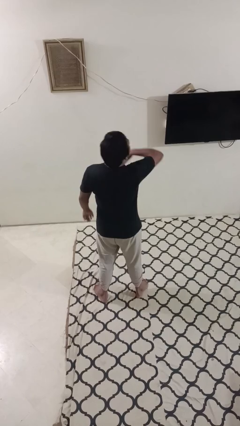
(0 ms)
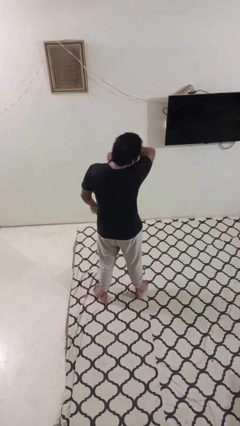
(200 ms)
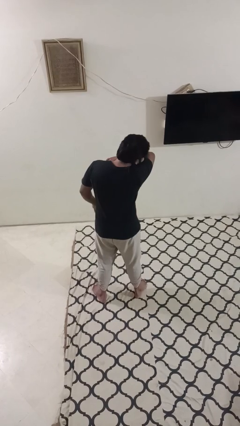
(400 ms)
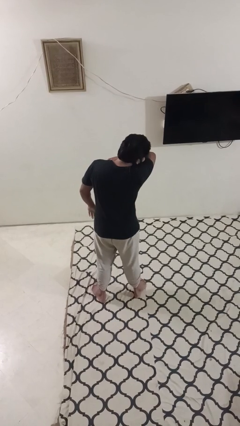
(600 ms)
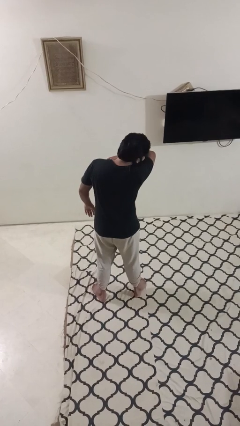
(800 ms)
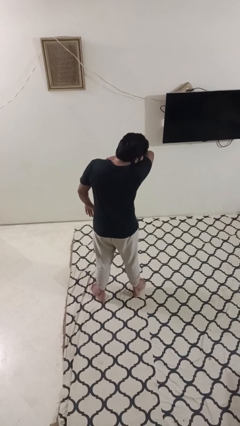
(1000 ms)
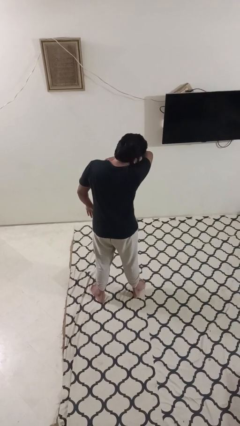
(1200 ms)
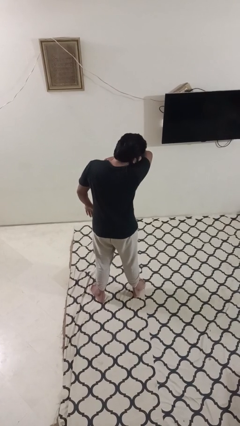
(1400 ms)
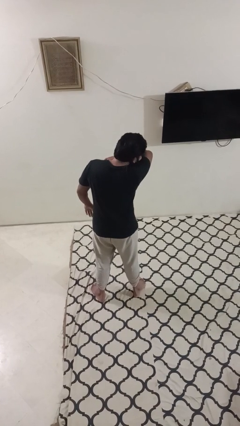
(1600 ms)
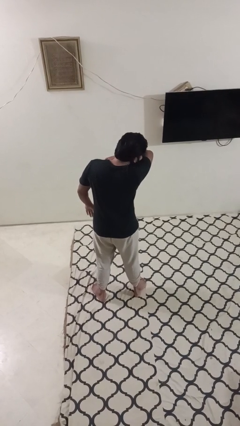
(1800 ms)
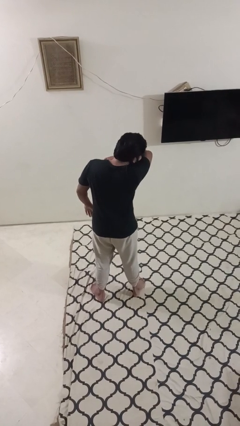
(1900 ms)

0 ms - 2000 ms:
person sneezes into arm

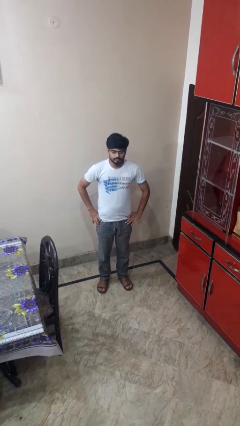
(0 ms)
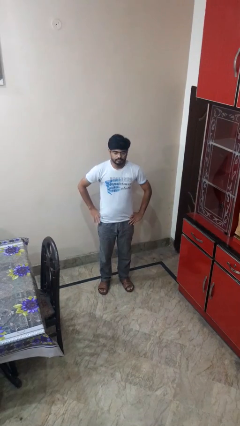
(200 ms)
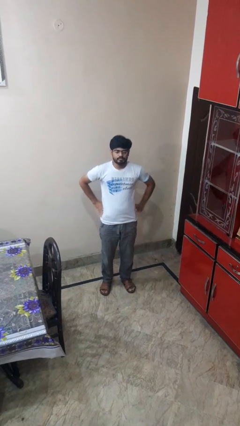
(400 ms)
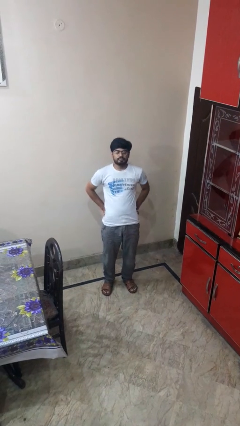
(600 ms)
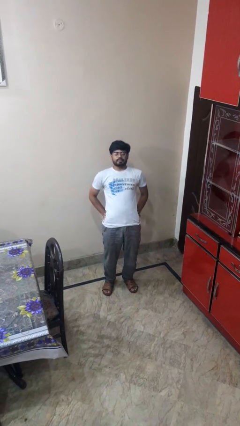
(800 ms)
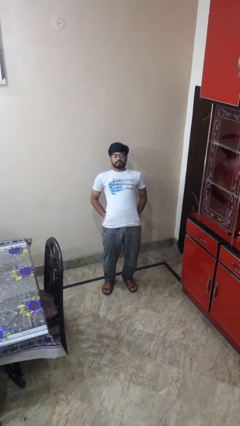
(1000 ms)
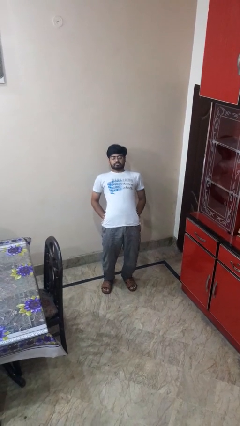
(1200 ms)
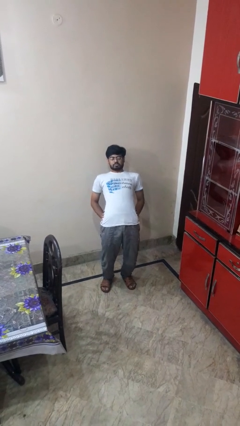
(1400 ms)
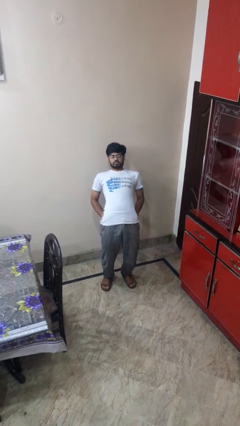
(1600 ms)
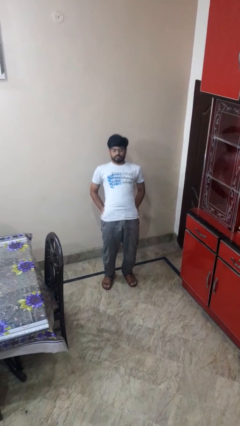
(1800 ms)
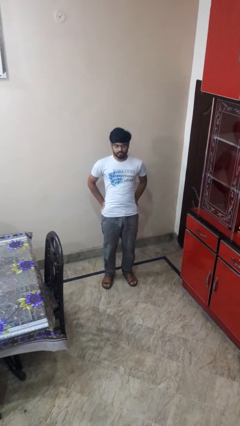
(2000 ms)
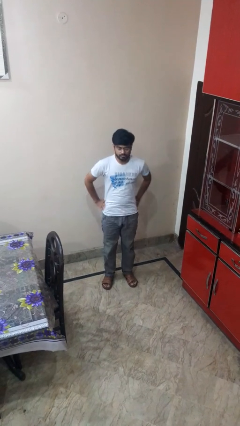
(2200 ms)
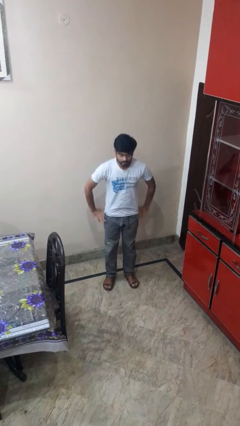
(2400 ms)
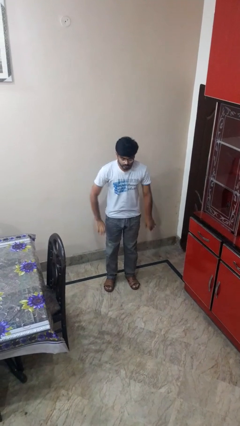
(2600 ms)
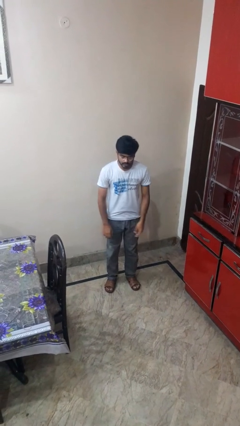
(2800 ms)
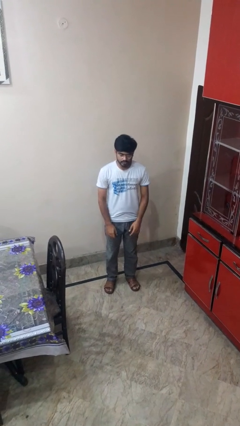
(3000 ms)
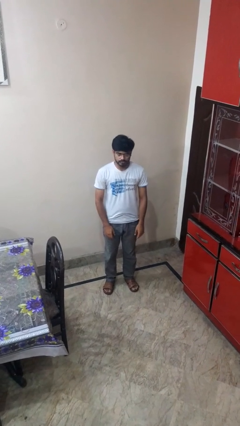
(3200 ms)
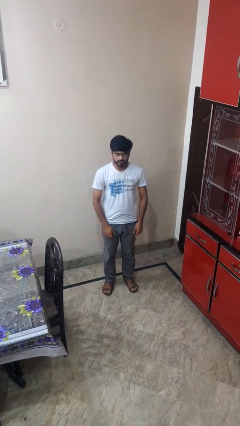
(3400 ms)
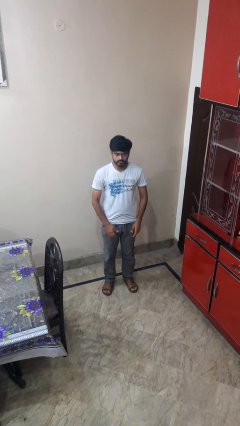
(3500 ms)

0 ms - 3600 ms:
person stretches back

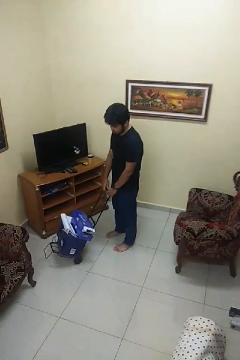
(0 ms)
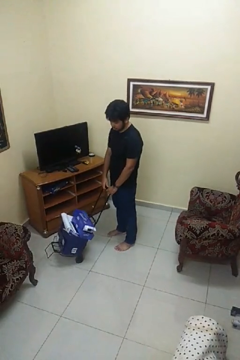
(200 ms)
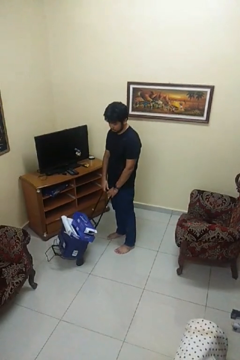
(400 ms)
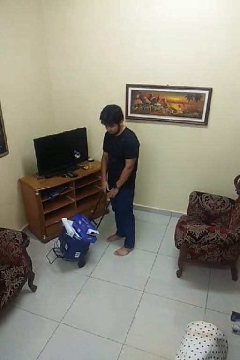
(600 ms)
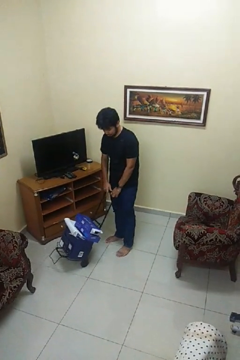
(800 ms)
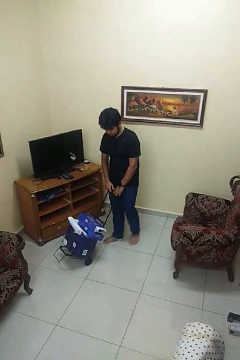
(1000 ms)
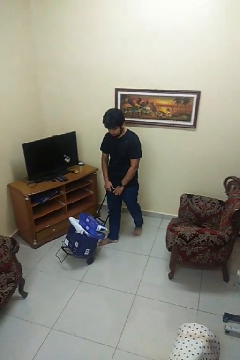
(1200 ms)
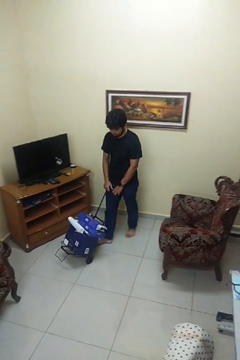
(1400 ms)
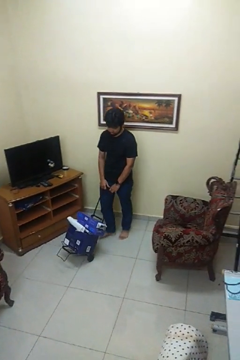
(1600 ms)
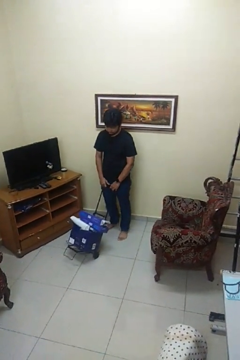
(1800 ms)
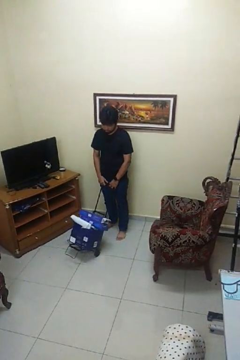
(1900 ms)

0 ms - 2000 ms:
person pulls wheeled cart

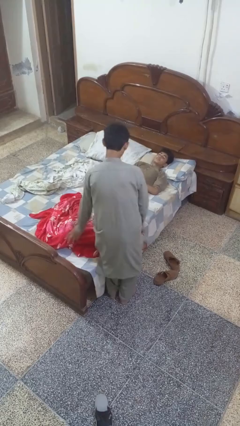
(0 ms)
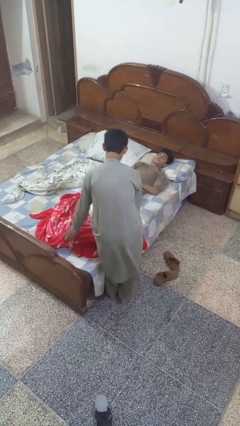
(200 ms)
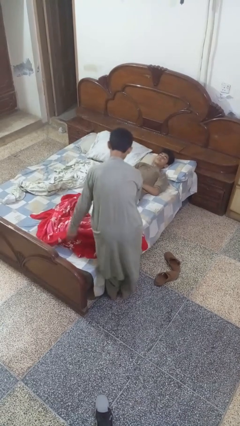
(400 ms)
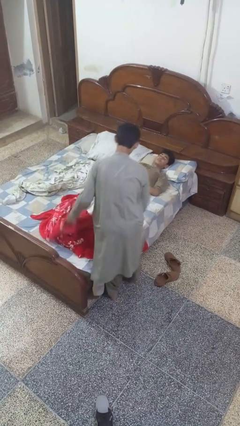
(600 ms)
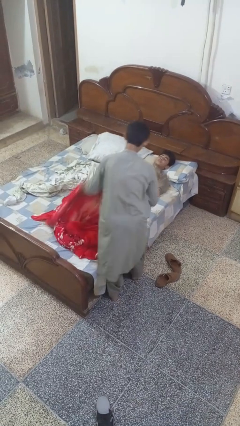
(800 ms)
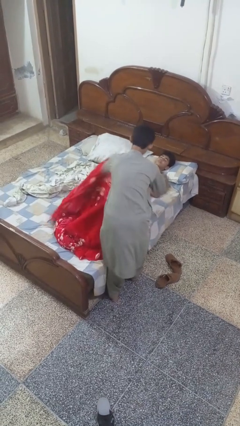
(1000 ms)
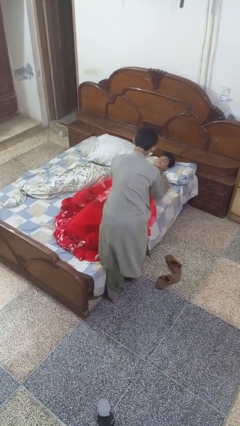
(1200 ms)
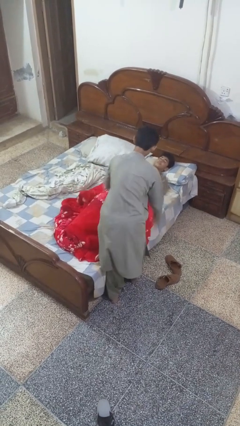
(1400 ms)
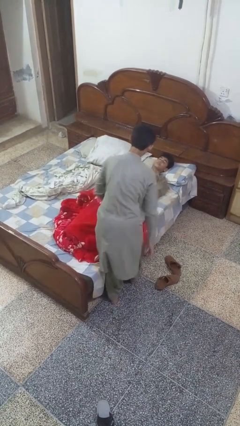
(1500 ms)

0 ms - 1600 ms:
person covers friend with blanket

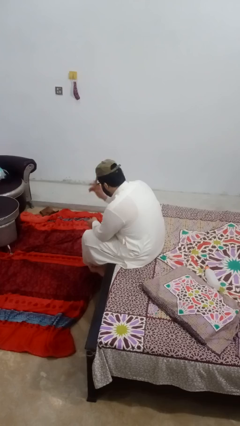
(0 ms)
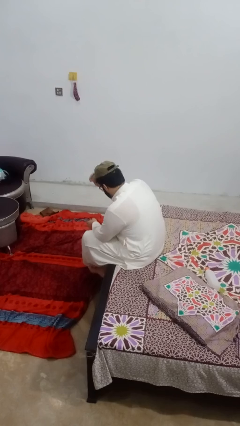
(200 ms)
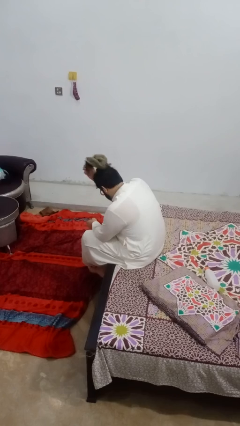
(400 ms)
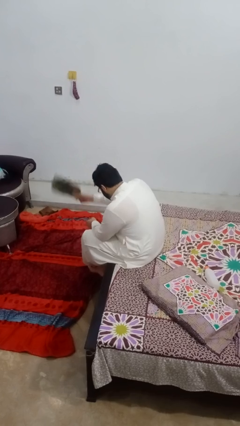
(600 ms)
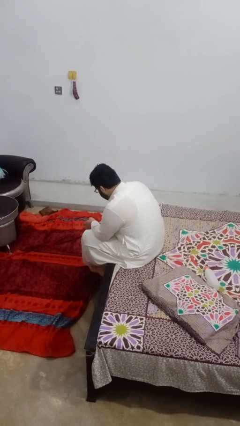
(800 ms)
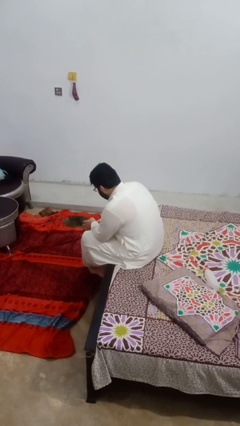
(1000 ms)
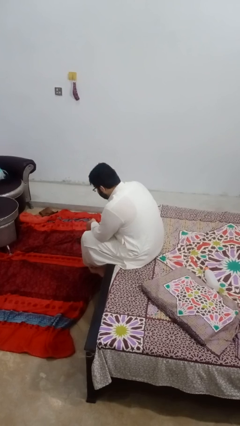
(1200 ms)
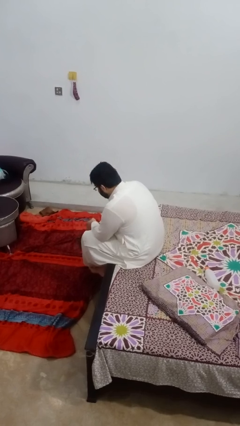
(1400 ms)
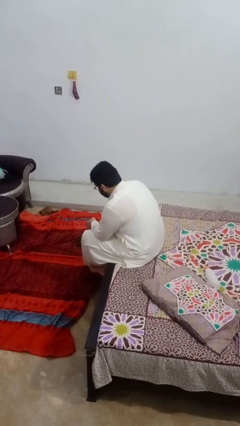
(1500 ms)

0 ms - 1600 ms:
person takes off hat

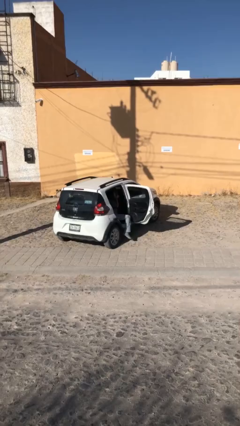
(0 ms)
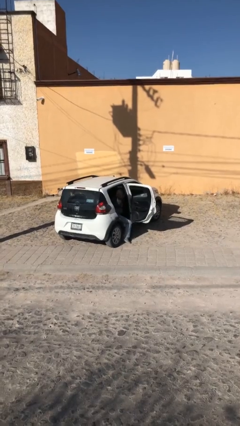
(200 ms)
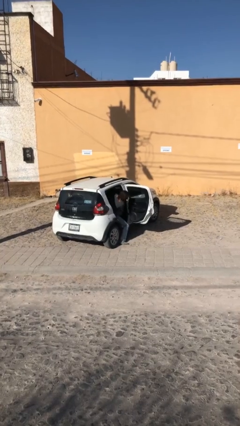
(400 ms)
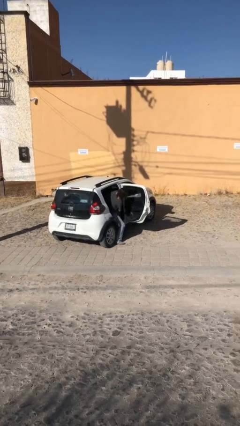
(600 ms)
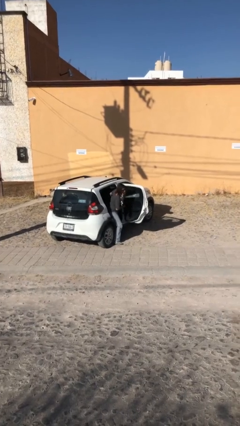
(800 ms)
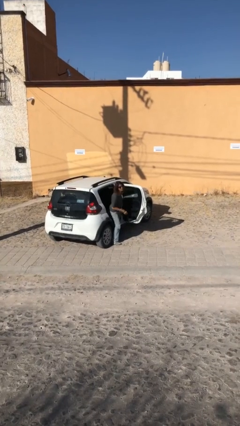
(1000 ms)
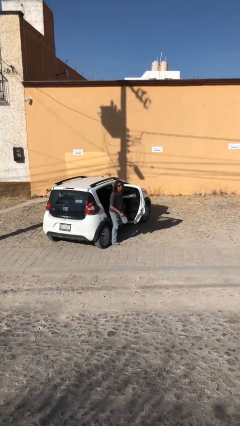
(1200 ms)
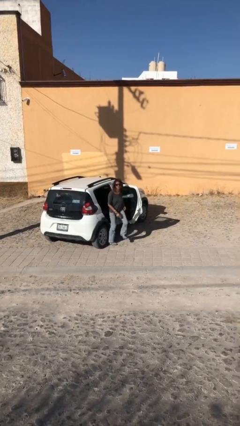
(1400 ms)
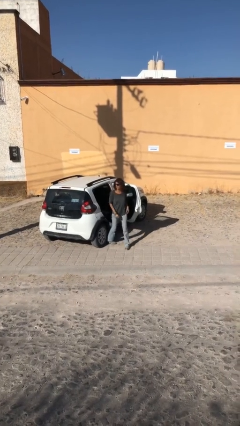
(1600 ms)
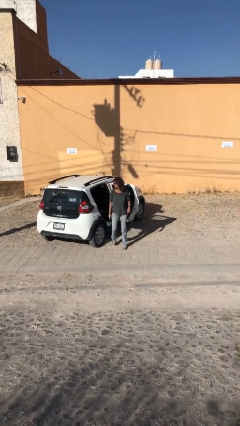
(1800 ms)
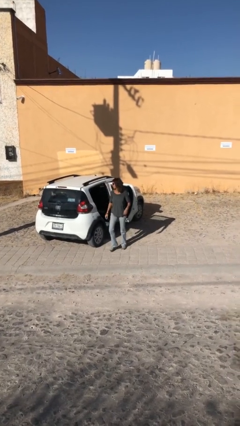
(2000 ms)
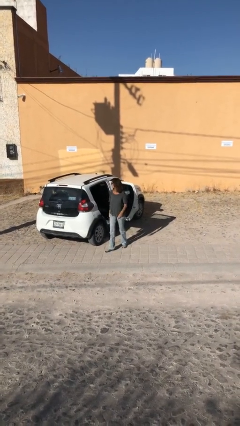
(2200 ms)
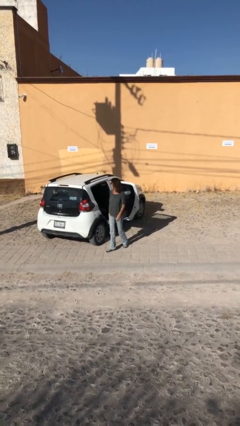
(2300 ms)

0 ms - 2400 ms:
person exits car

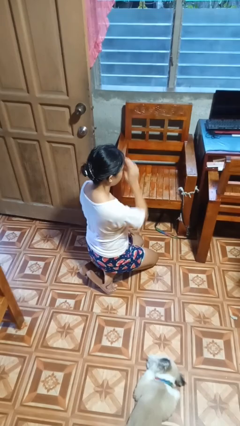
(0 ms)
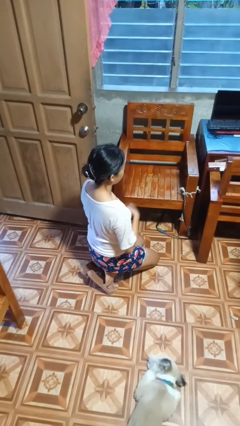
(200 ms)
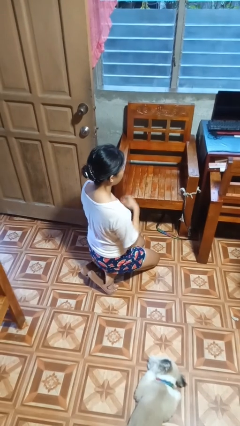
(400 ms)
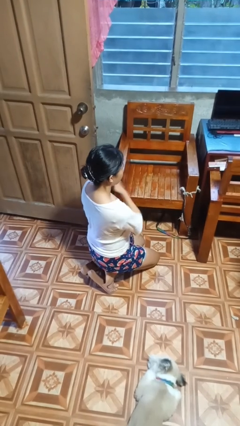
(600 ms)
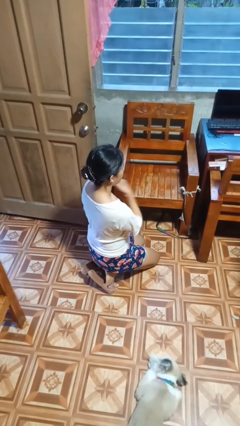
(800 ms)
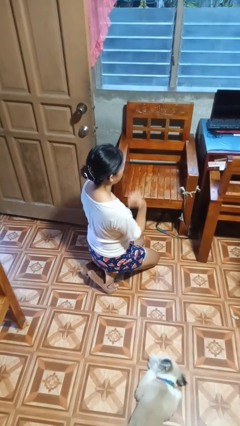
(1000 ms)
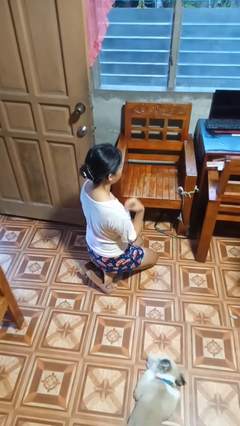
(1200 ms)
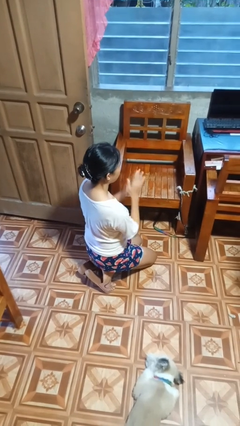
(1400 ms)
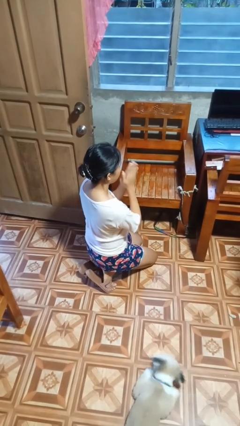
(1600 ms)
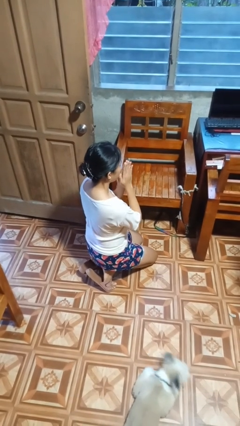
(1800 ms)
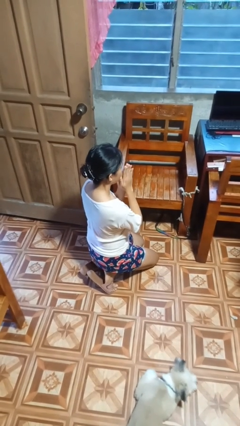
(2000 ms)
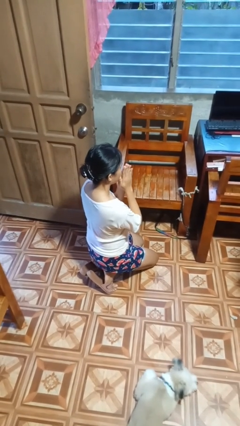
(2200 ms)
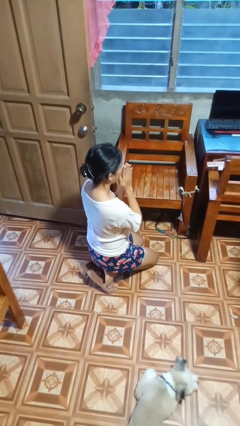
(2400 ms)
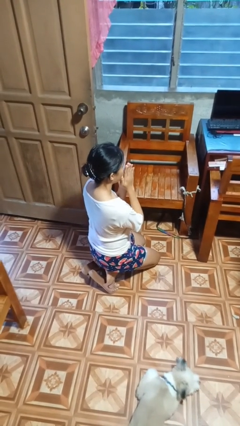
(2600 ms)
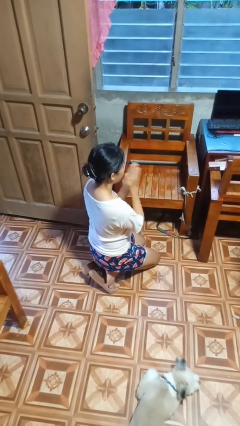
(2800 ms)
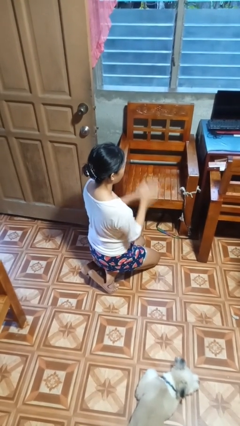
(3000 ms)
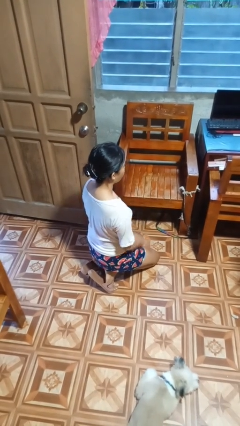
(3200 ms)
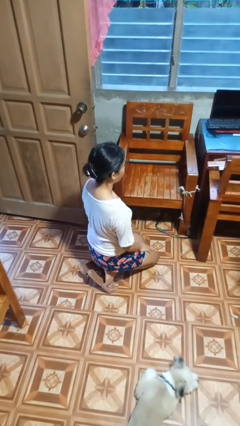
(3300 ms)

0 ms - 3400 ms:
person prays

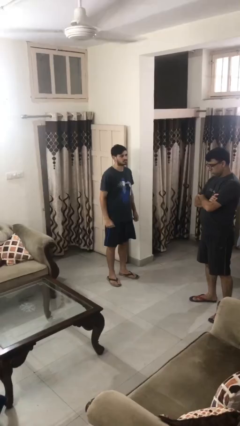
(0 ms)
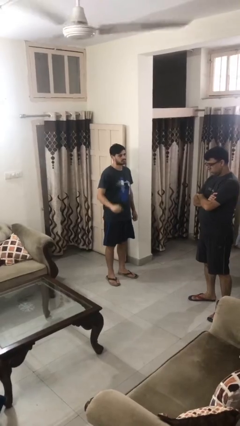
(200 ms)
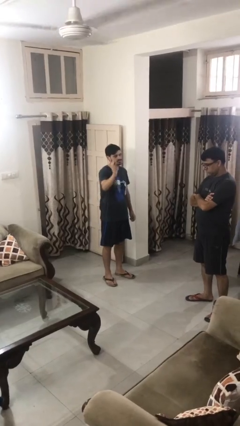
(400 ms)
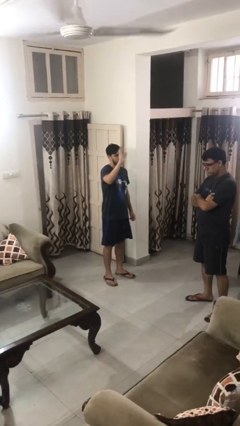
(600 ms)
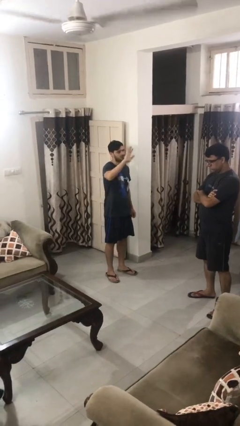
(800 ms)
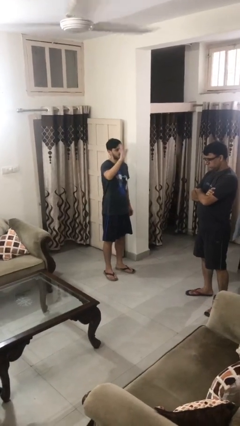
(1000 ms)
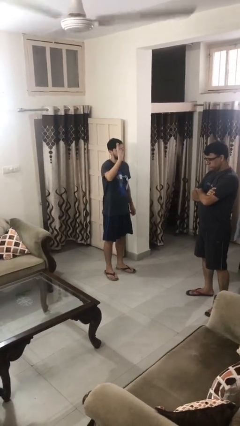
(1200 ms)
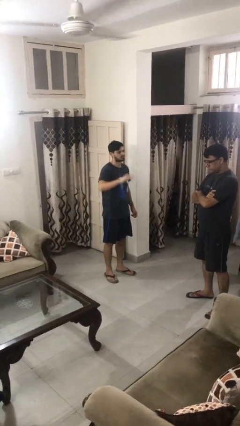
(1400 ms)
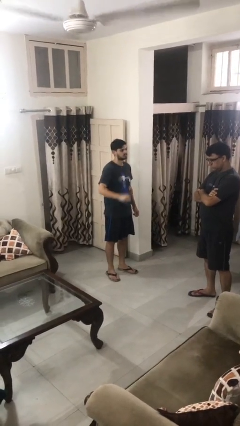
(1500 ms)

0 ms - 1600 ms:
person waves at person
